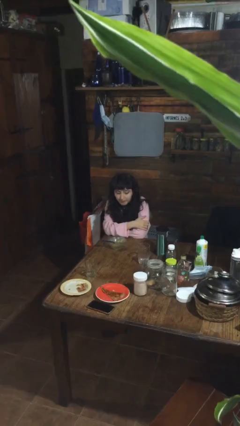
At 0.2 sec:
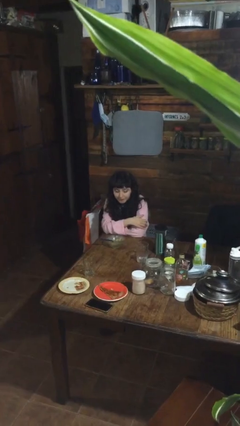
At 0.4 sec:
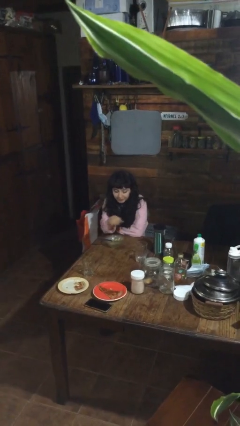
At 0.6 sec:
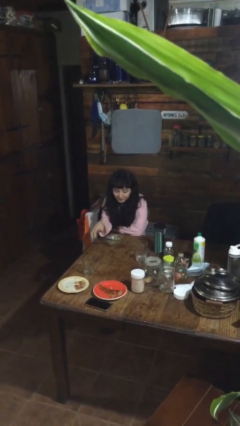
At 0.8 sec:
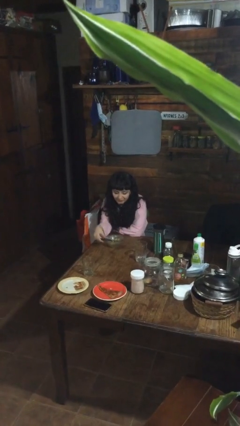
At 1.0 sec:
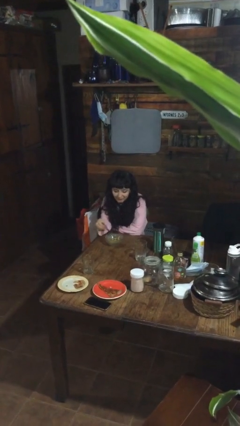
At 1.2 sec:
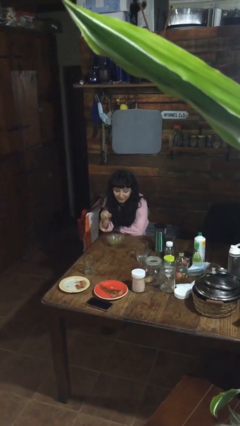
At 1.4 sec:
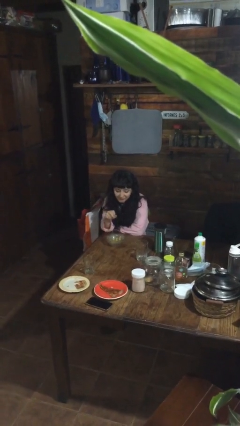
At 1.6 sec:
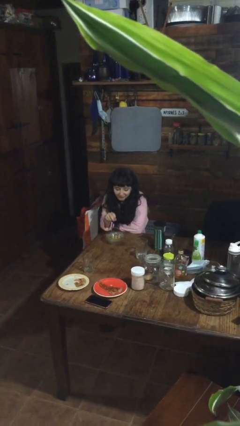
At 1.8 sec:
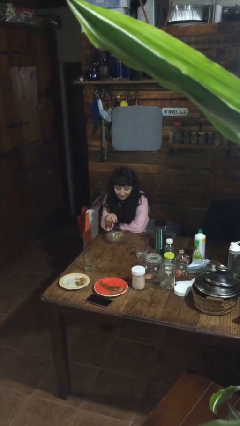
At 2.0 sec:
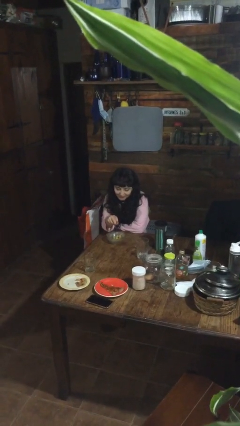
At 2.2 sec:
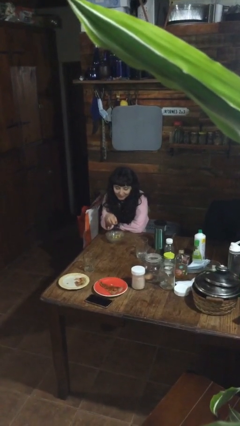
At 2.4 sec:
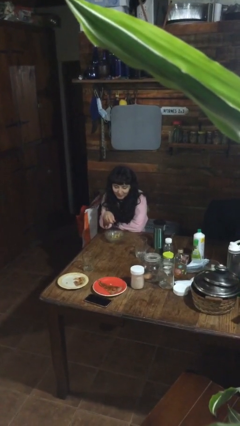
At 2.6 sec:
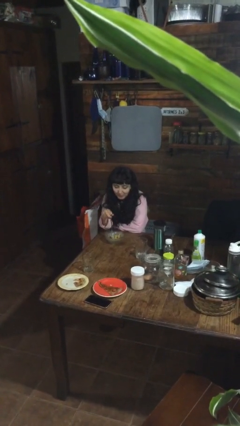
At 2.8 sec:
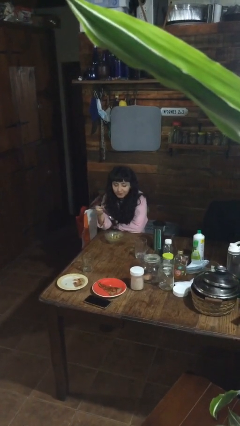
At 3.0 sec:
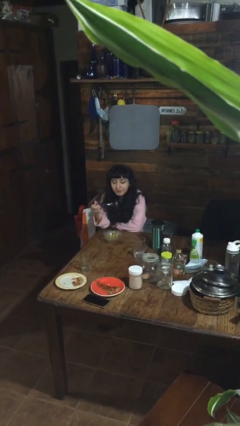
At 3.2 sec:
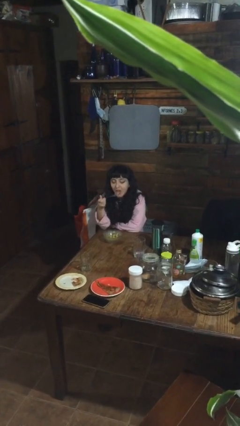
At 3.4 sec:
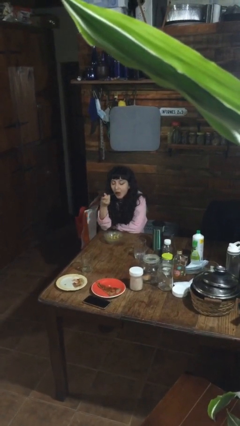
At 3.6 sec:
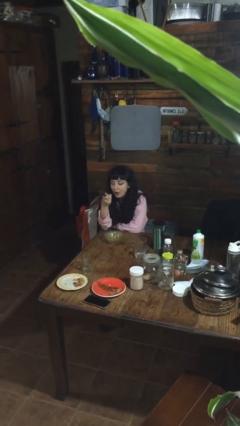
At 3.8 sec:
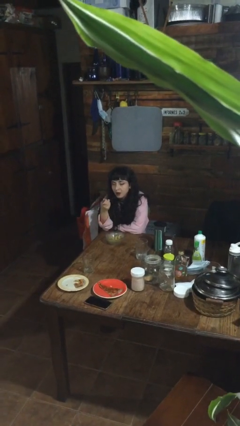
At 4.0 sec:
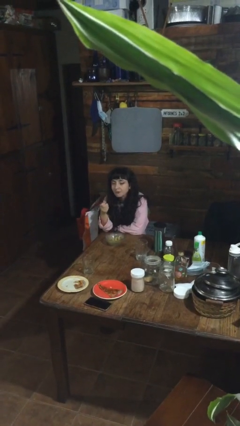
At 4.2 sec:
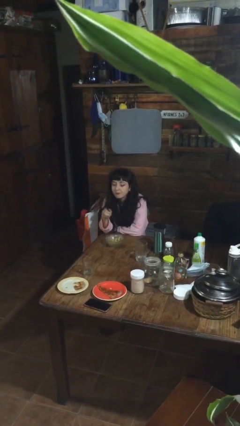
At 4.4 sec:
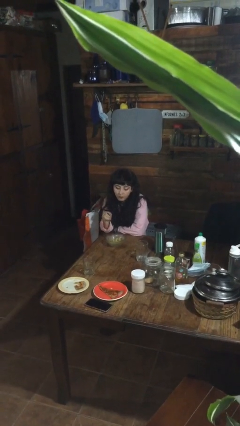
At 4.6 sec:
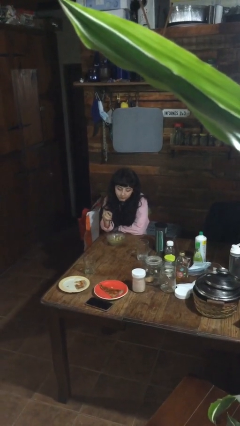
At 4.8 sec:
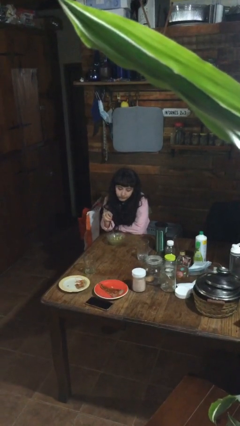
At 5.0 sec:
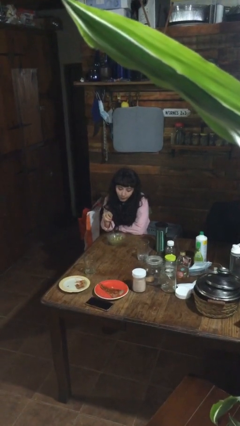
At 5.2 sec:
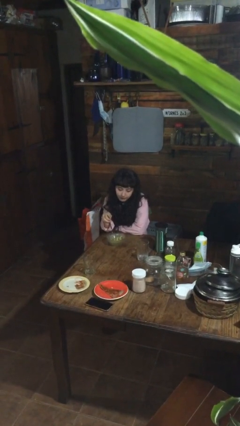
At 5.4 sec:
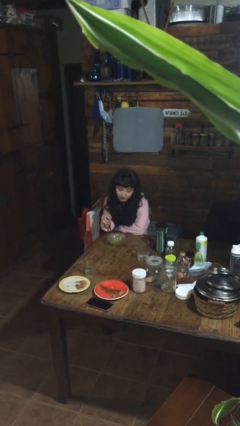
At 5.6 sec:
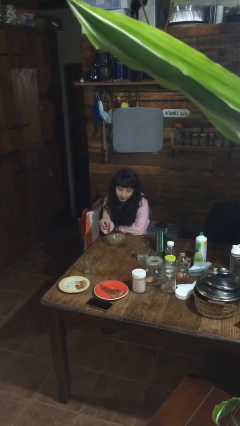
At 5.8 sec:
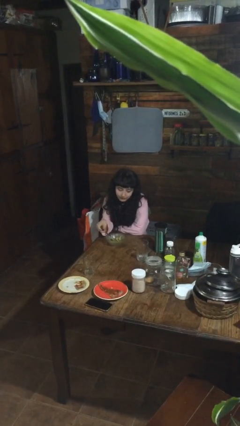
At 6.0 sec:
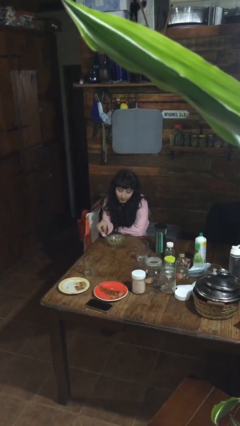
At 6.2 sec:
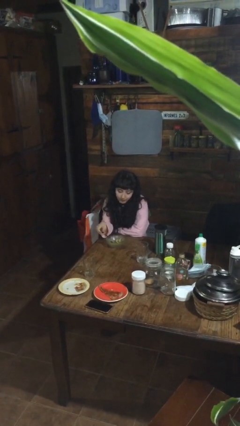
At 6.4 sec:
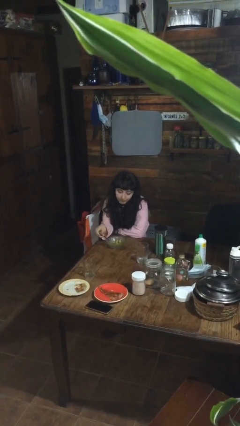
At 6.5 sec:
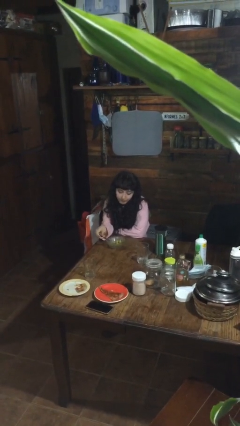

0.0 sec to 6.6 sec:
person eats with utensil

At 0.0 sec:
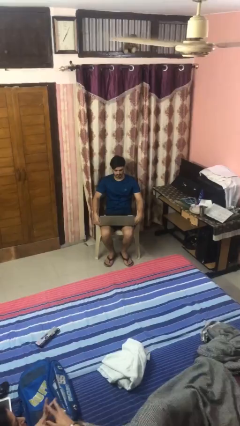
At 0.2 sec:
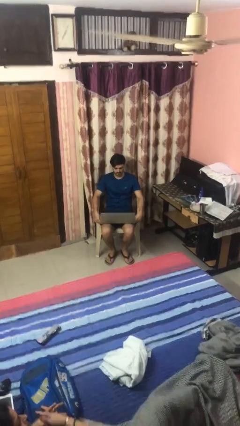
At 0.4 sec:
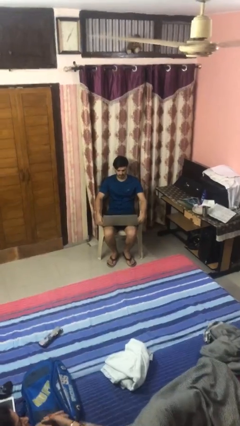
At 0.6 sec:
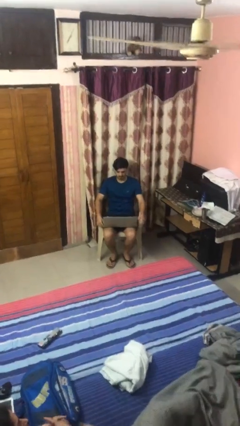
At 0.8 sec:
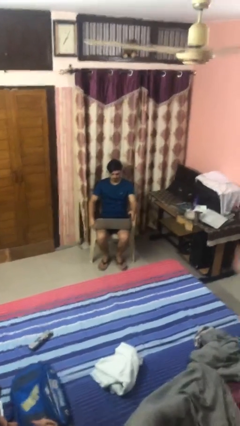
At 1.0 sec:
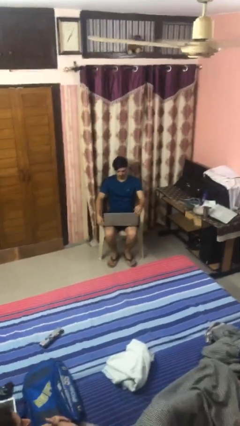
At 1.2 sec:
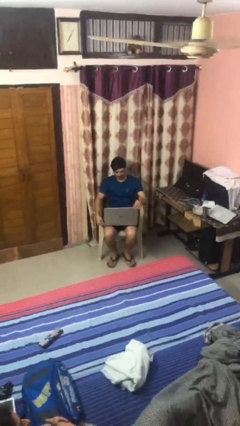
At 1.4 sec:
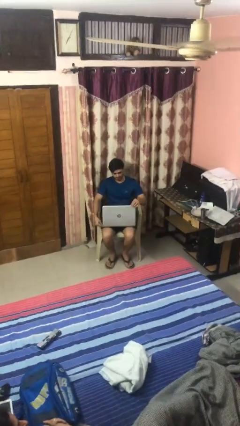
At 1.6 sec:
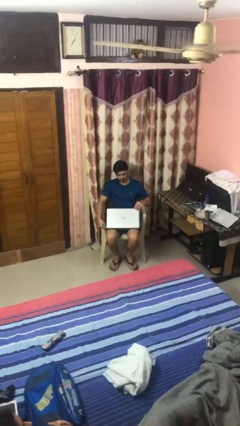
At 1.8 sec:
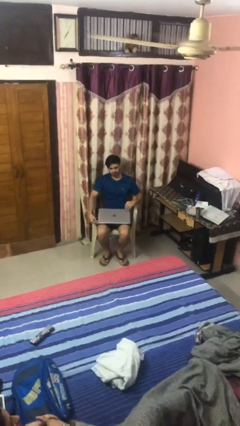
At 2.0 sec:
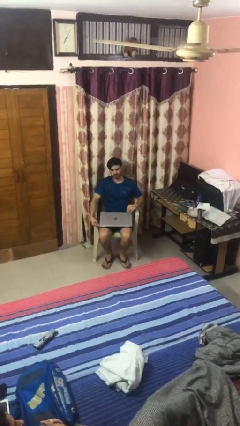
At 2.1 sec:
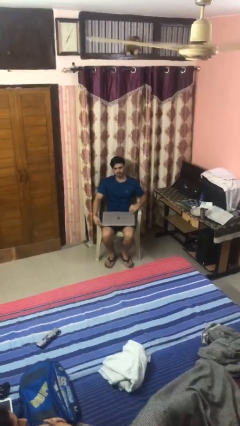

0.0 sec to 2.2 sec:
person closes laptop

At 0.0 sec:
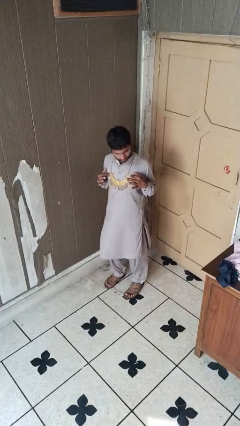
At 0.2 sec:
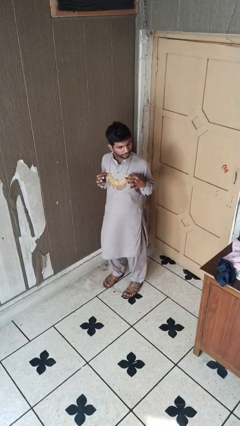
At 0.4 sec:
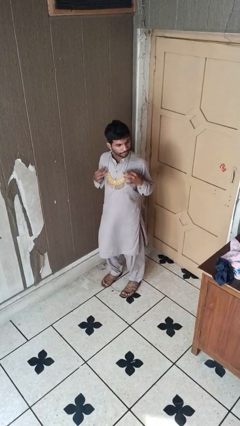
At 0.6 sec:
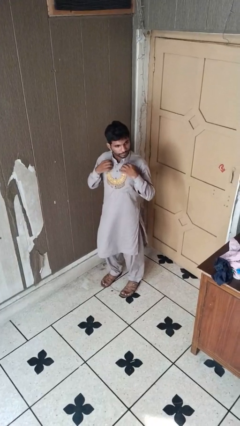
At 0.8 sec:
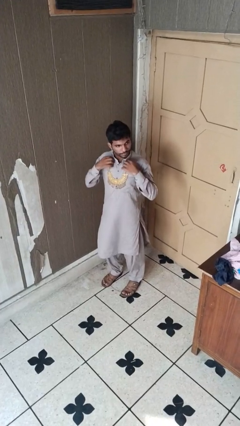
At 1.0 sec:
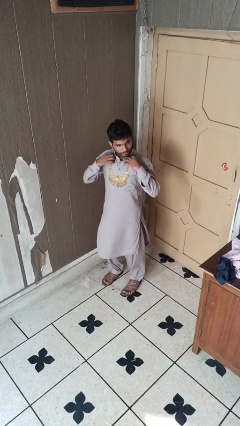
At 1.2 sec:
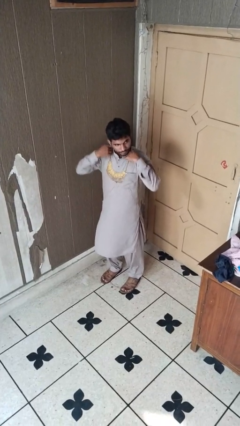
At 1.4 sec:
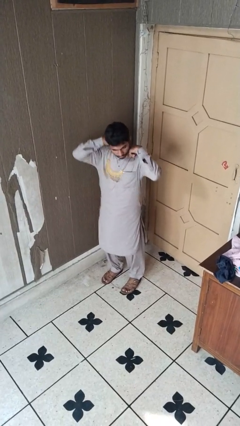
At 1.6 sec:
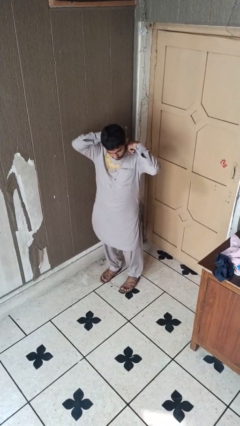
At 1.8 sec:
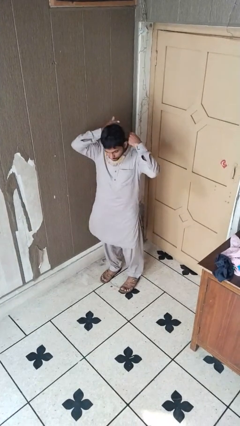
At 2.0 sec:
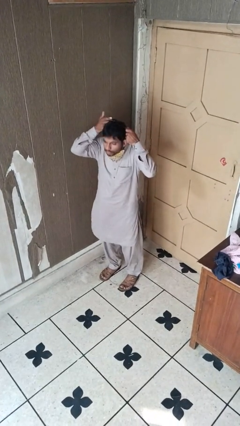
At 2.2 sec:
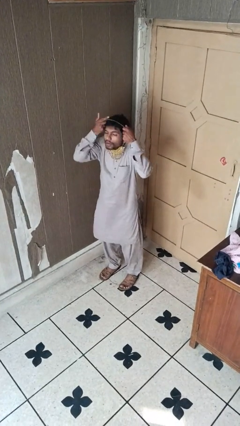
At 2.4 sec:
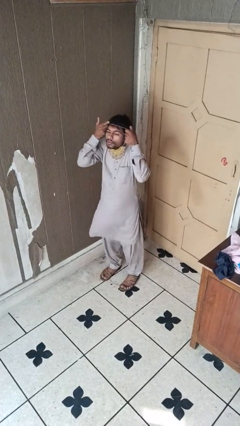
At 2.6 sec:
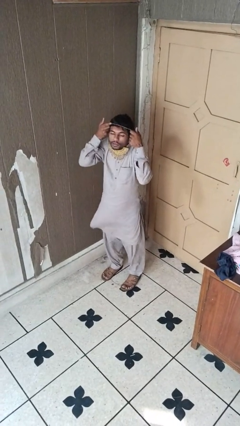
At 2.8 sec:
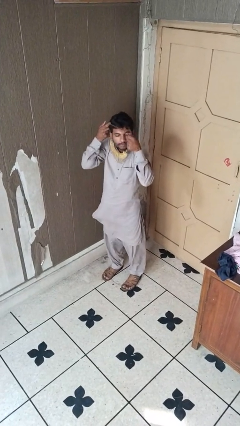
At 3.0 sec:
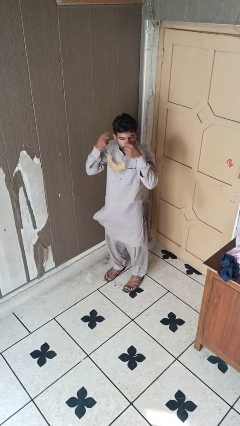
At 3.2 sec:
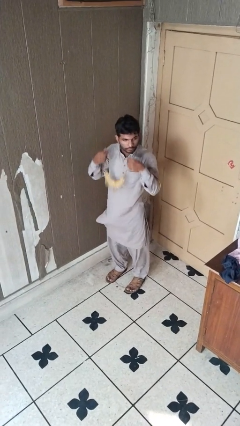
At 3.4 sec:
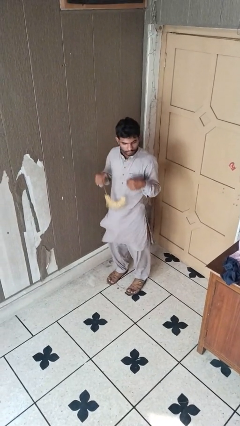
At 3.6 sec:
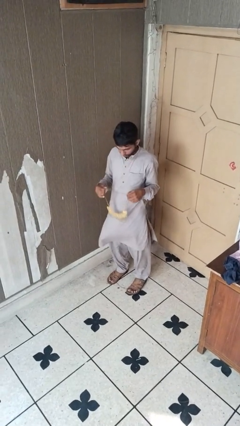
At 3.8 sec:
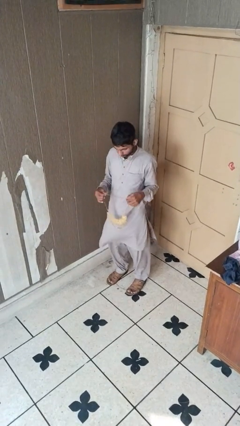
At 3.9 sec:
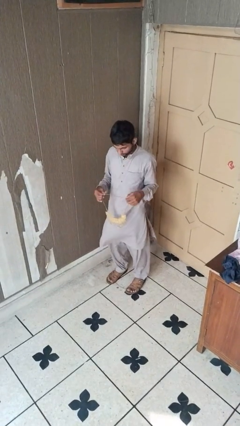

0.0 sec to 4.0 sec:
person takes off necklace

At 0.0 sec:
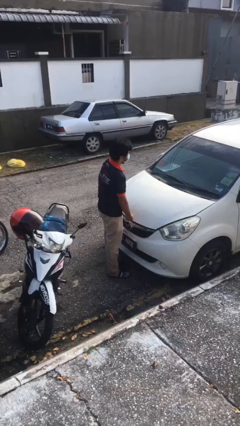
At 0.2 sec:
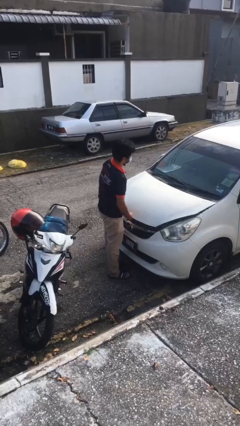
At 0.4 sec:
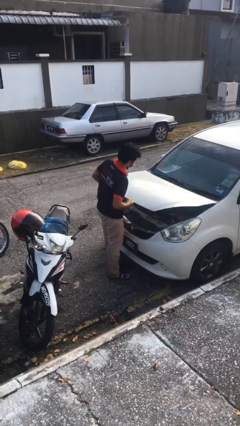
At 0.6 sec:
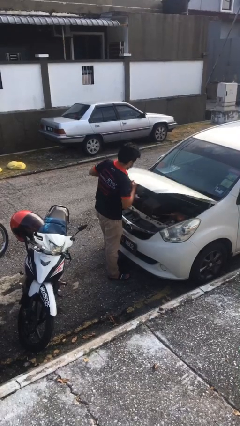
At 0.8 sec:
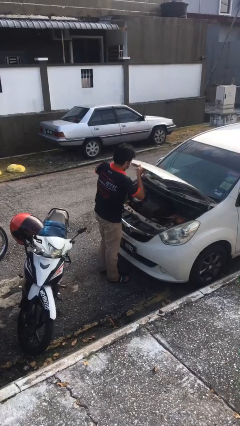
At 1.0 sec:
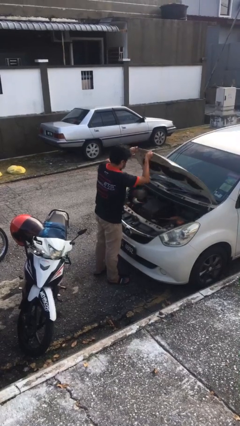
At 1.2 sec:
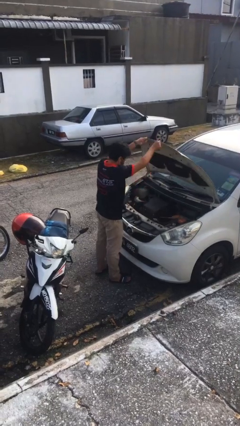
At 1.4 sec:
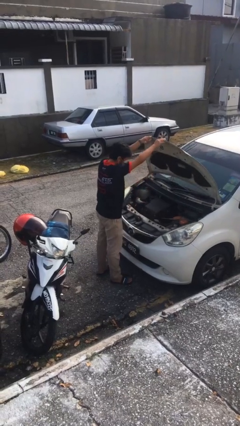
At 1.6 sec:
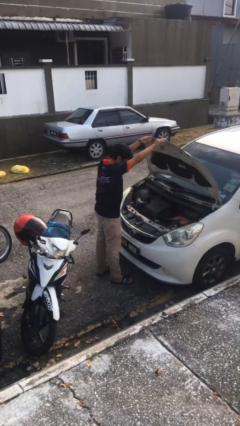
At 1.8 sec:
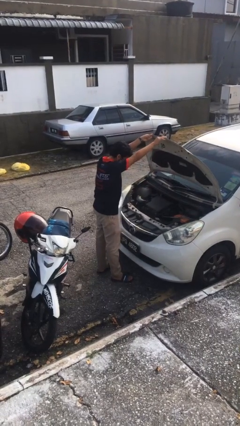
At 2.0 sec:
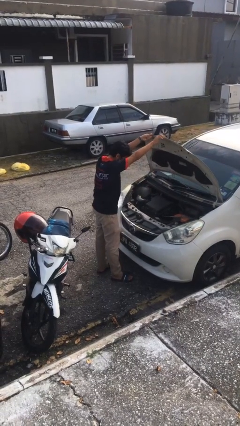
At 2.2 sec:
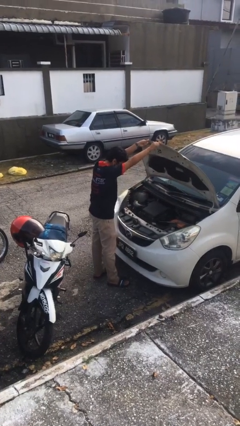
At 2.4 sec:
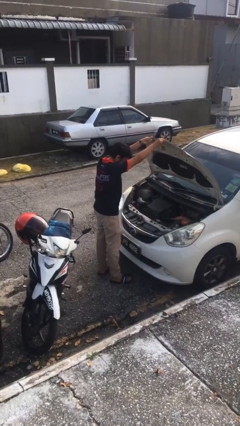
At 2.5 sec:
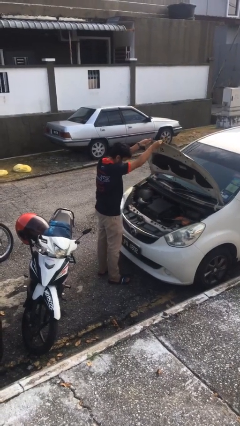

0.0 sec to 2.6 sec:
person opens car hood

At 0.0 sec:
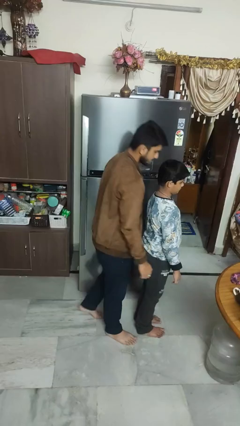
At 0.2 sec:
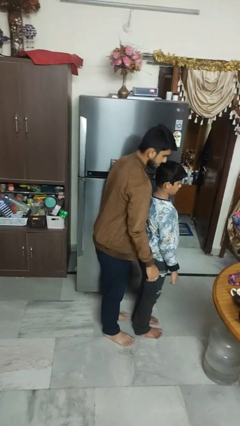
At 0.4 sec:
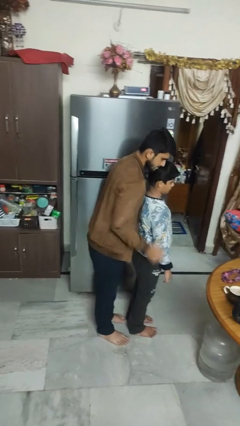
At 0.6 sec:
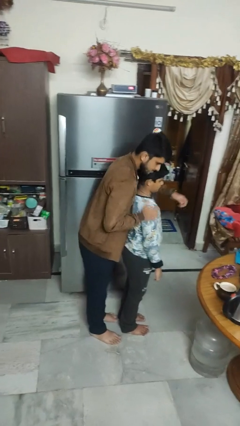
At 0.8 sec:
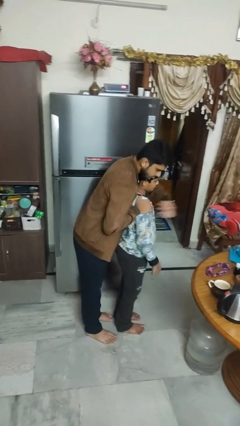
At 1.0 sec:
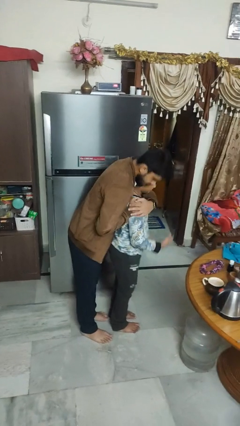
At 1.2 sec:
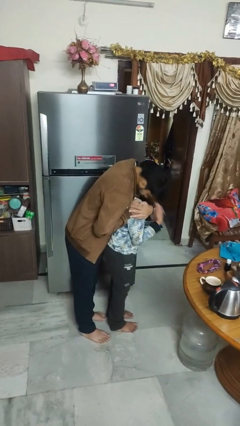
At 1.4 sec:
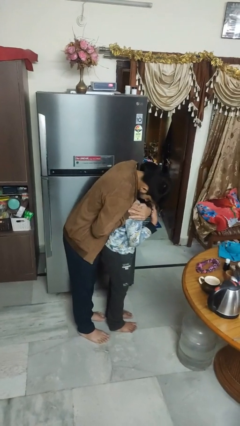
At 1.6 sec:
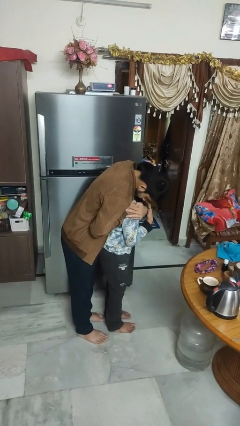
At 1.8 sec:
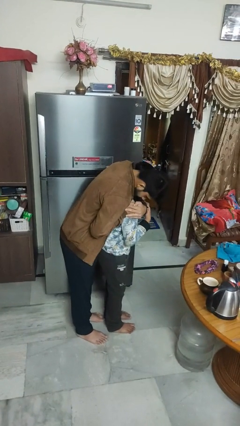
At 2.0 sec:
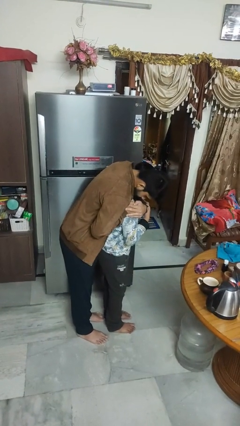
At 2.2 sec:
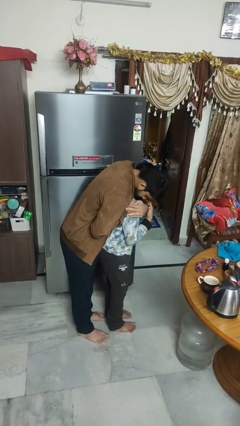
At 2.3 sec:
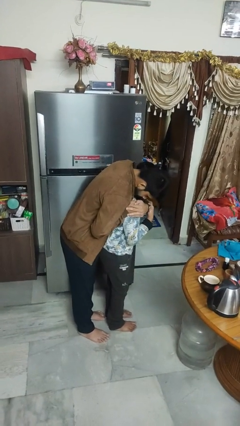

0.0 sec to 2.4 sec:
person hugs person from behind
